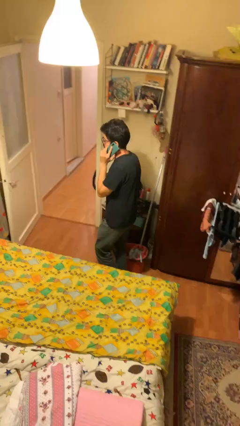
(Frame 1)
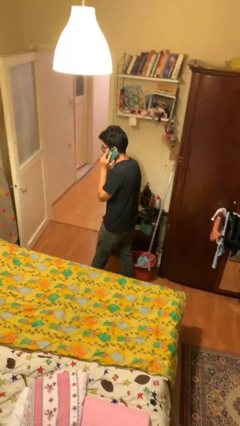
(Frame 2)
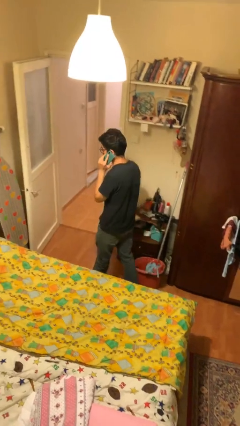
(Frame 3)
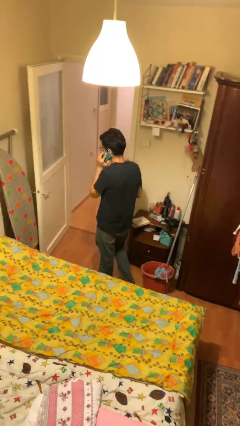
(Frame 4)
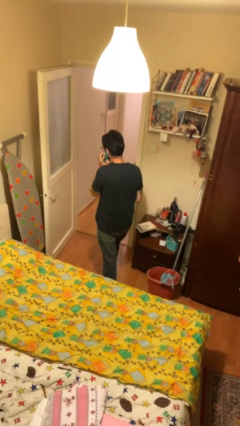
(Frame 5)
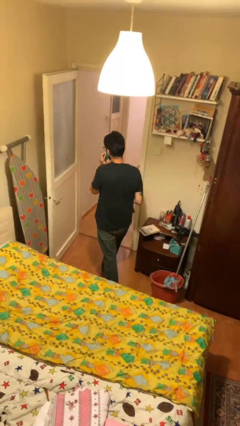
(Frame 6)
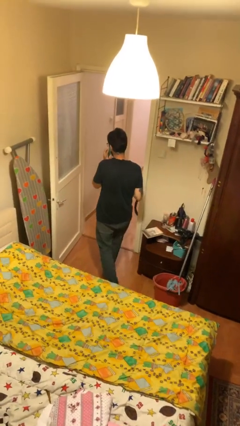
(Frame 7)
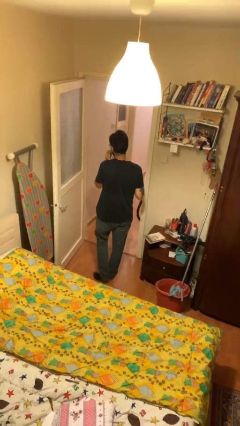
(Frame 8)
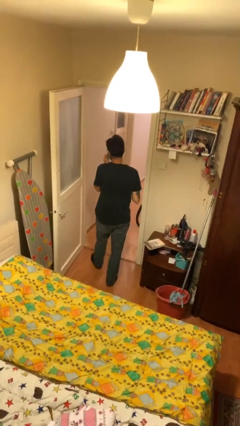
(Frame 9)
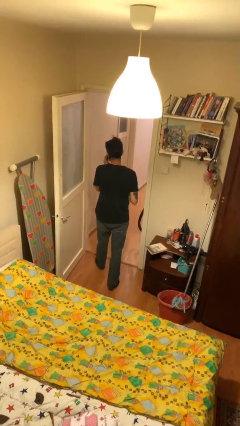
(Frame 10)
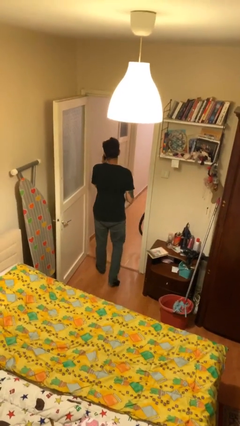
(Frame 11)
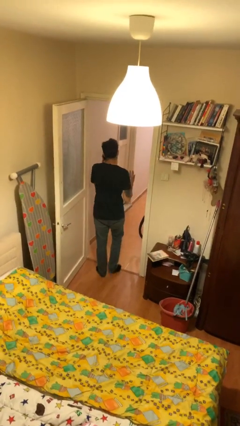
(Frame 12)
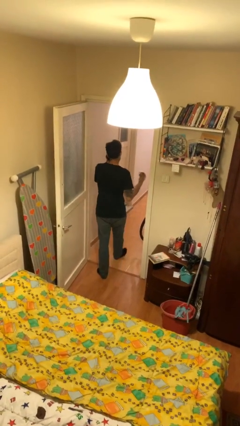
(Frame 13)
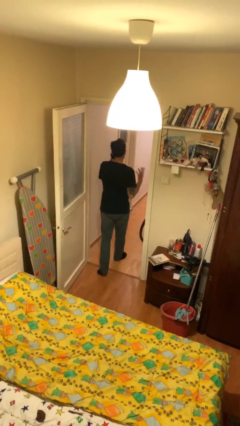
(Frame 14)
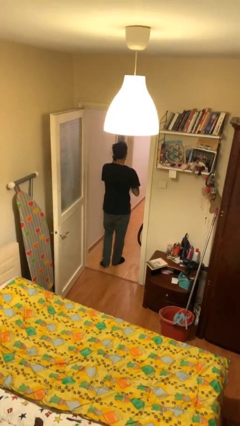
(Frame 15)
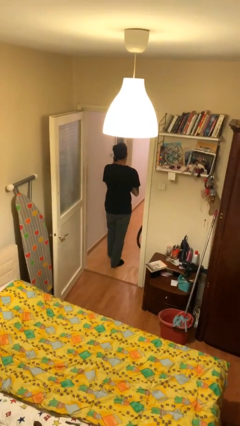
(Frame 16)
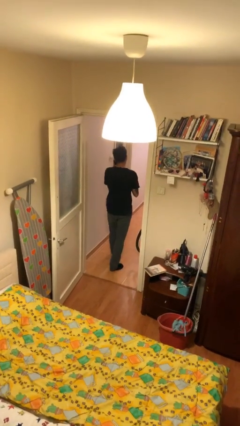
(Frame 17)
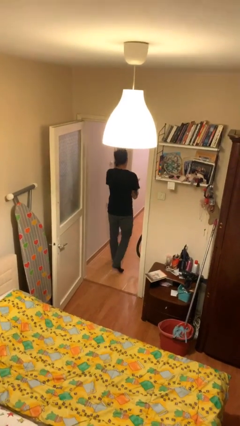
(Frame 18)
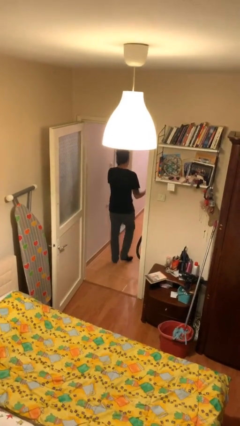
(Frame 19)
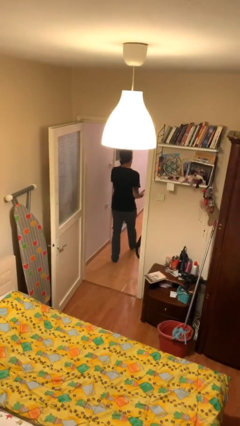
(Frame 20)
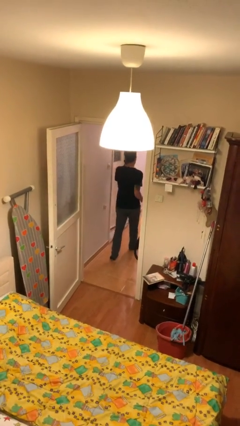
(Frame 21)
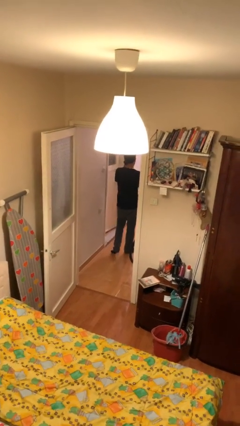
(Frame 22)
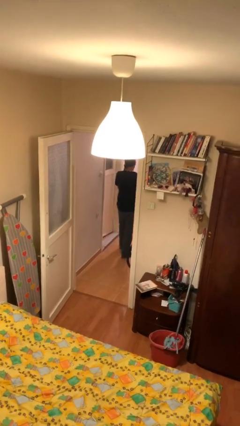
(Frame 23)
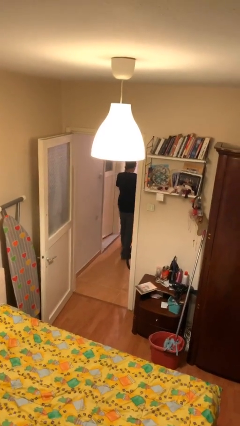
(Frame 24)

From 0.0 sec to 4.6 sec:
person exits scene through structure

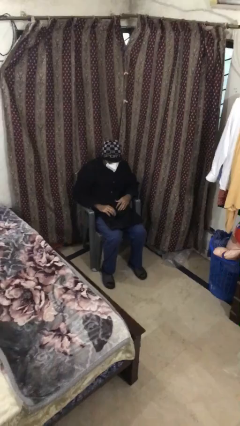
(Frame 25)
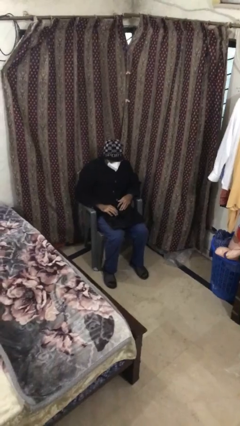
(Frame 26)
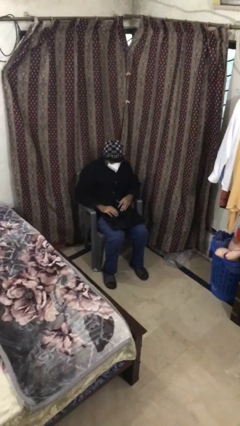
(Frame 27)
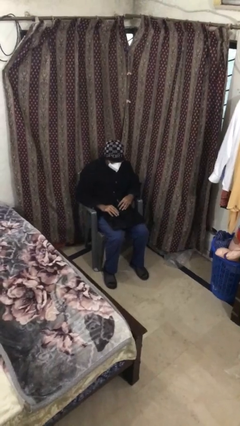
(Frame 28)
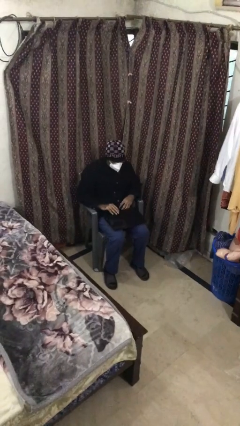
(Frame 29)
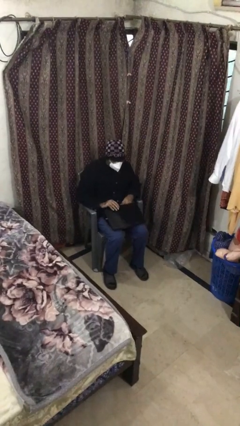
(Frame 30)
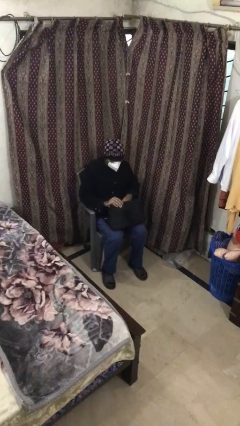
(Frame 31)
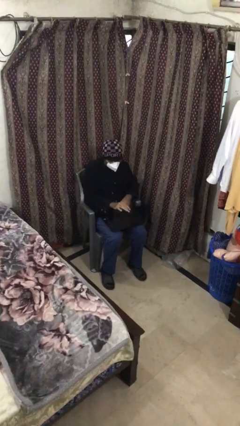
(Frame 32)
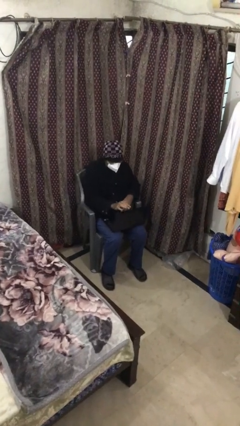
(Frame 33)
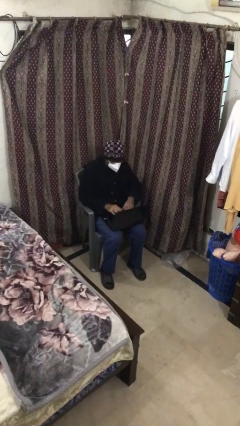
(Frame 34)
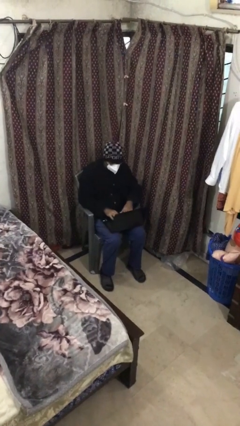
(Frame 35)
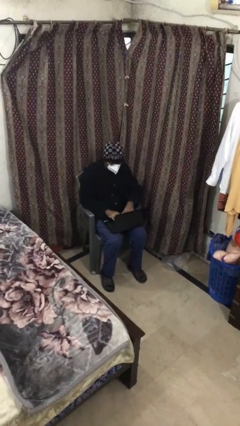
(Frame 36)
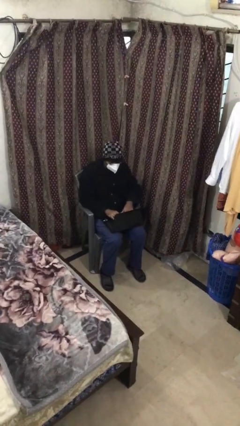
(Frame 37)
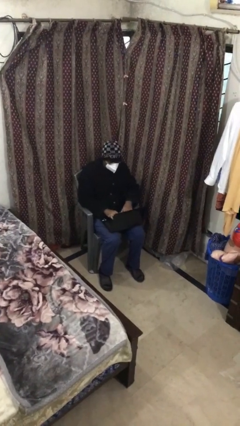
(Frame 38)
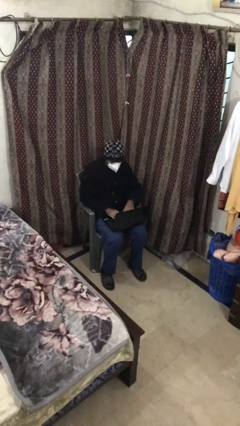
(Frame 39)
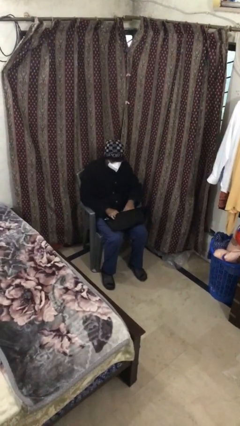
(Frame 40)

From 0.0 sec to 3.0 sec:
person interacts with laptop

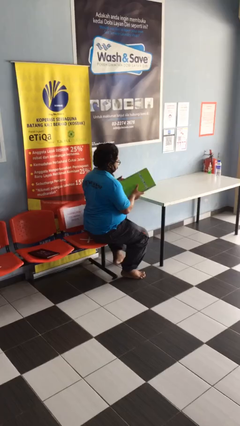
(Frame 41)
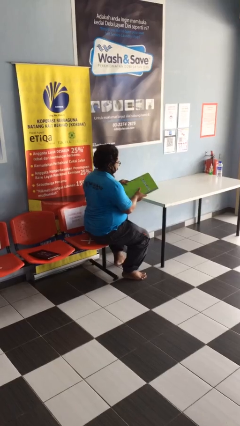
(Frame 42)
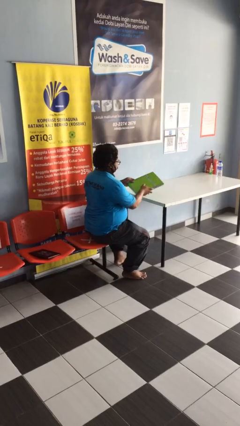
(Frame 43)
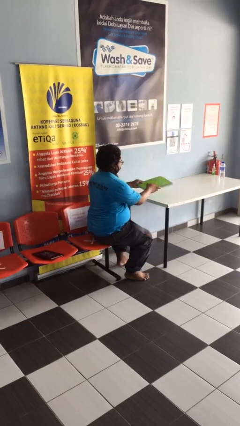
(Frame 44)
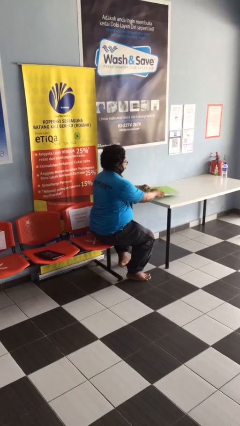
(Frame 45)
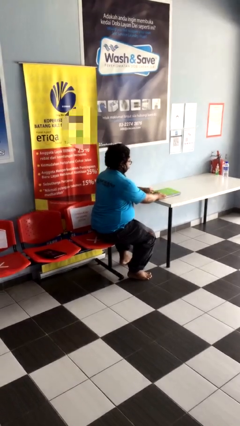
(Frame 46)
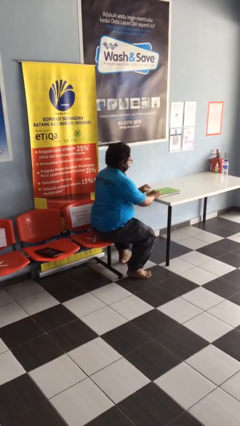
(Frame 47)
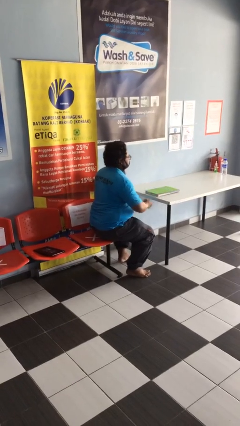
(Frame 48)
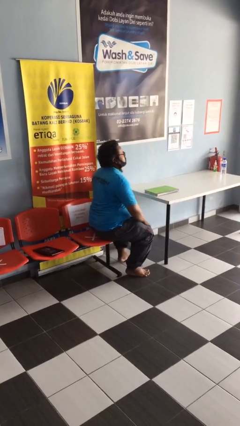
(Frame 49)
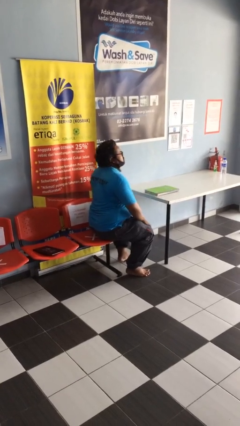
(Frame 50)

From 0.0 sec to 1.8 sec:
person puts down object on table

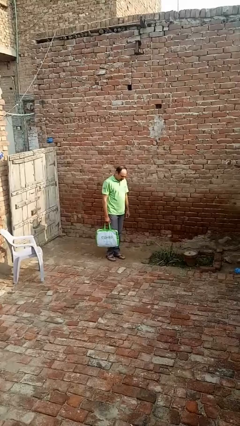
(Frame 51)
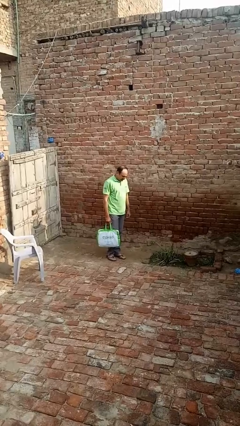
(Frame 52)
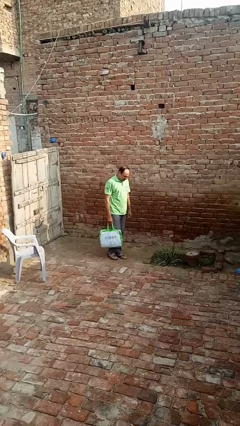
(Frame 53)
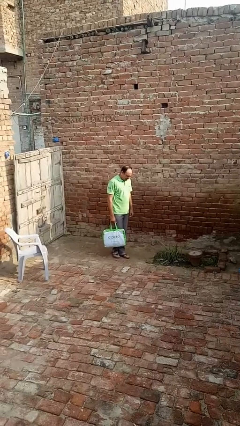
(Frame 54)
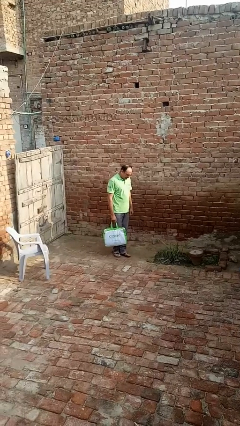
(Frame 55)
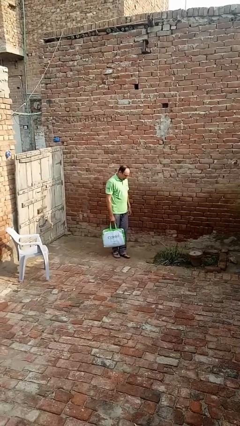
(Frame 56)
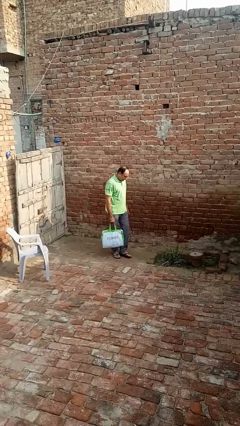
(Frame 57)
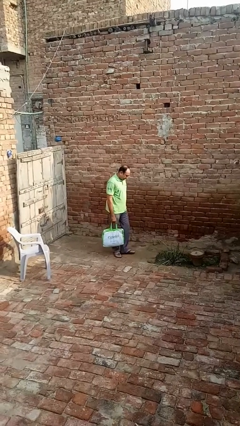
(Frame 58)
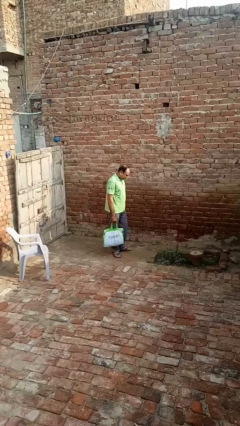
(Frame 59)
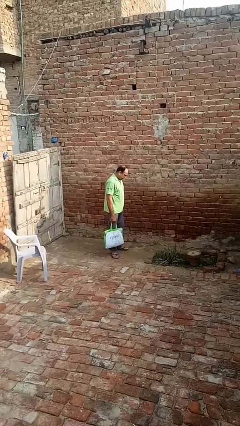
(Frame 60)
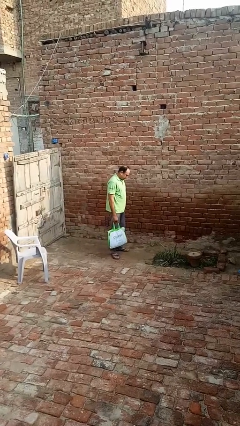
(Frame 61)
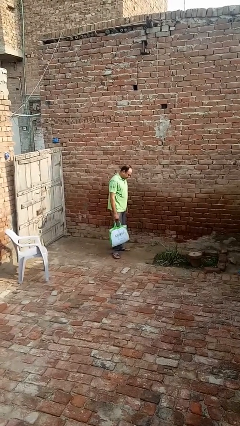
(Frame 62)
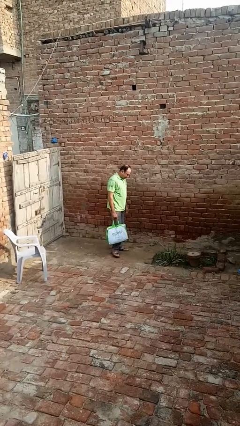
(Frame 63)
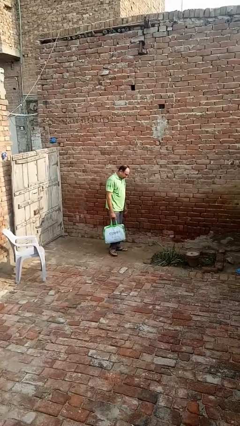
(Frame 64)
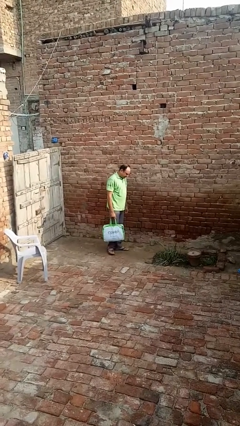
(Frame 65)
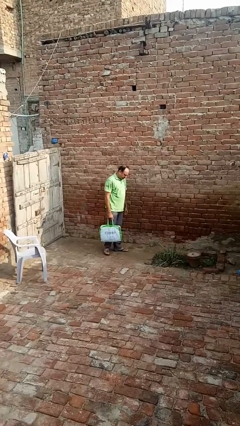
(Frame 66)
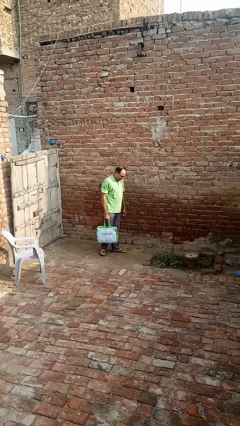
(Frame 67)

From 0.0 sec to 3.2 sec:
person carries groceries

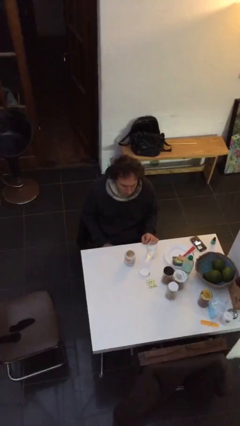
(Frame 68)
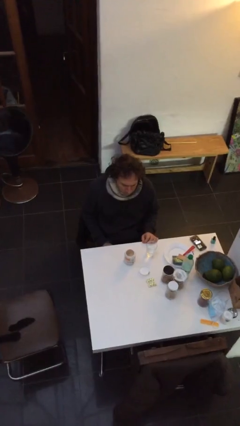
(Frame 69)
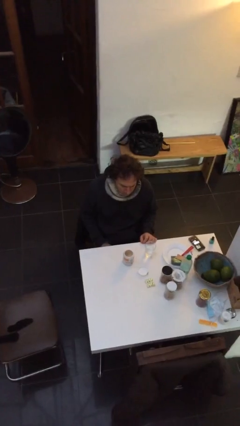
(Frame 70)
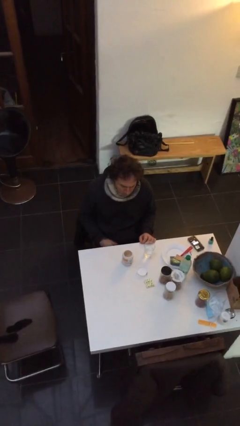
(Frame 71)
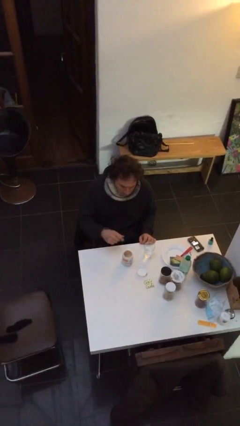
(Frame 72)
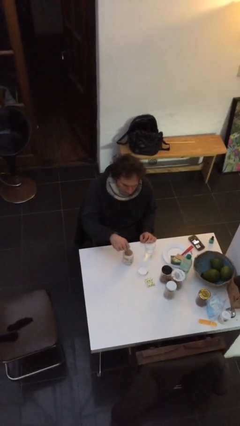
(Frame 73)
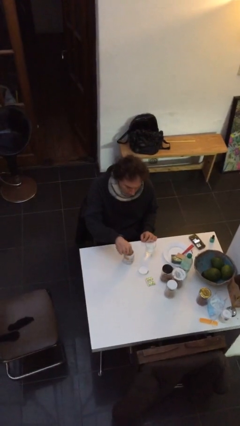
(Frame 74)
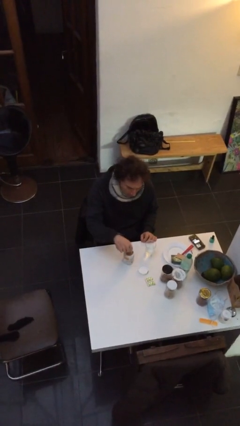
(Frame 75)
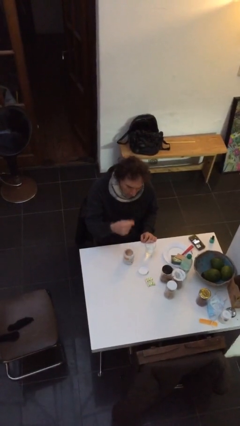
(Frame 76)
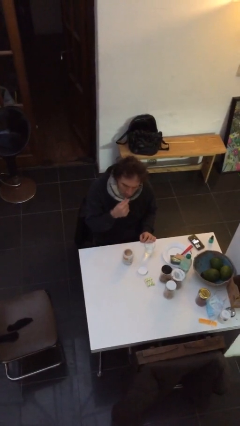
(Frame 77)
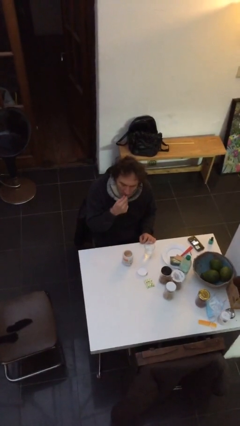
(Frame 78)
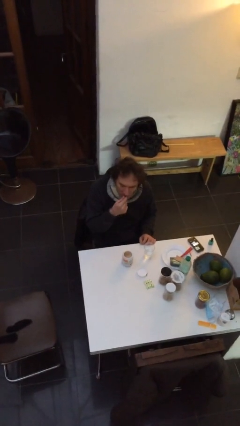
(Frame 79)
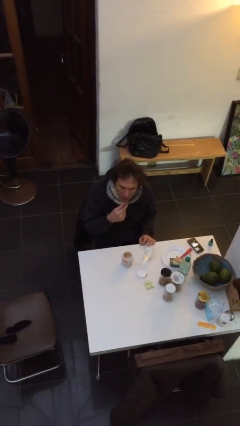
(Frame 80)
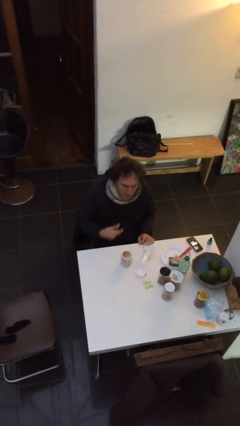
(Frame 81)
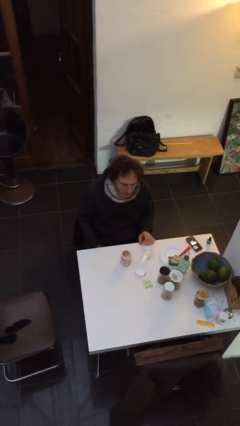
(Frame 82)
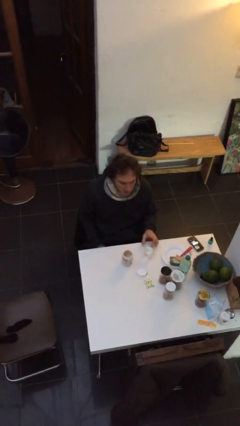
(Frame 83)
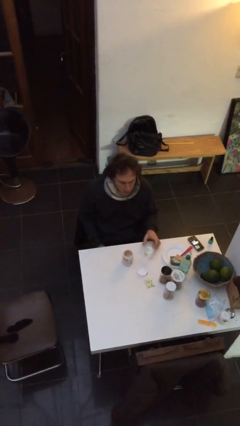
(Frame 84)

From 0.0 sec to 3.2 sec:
person takes medicine pills

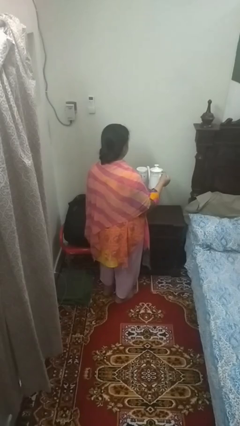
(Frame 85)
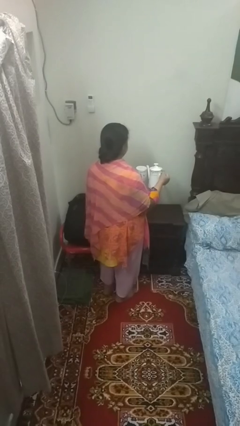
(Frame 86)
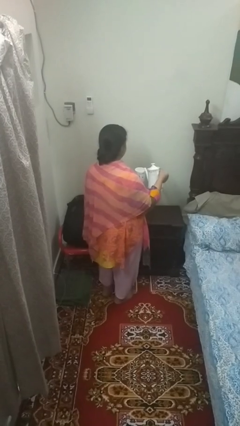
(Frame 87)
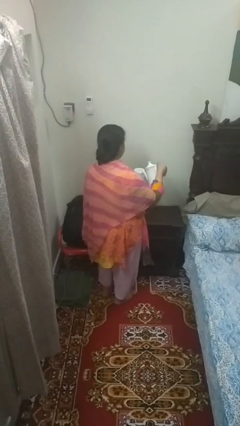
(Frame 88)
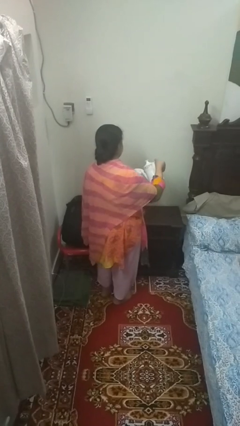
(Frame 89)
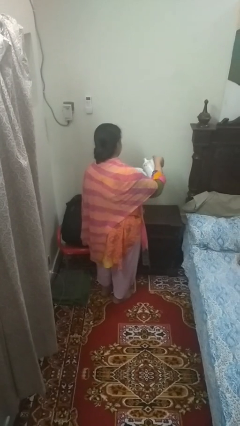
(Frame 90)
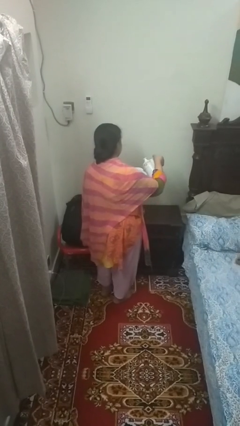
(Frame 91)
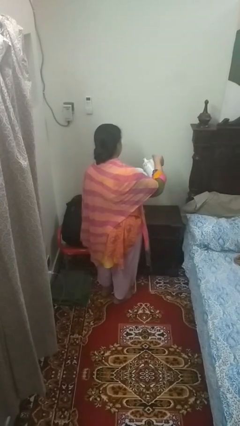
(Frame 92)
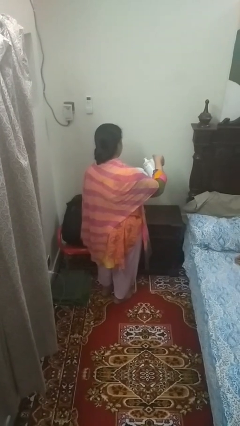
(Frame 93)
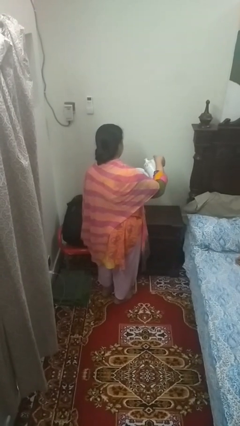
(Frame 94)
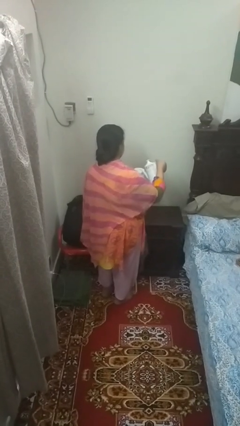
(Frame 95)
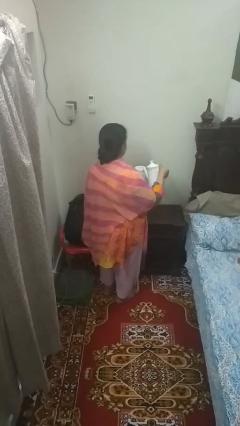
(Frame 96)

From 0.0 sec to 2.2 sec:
person pours coffee into mug
